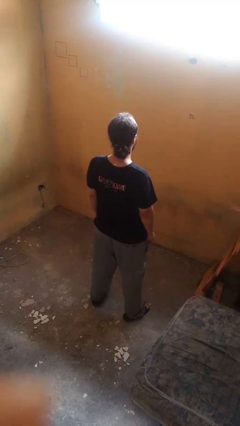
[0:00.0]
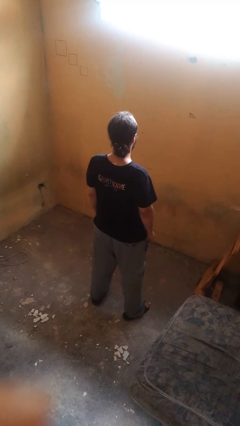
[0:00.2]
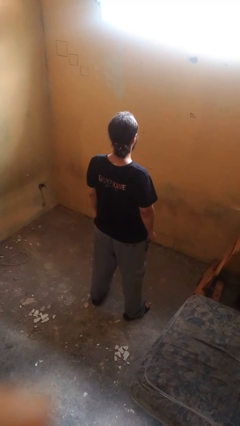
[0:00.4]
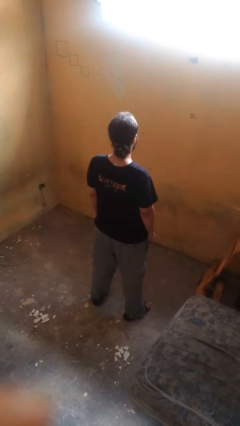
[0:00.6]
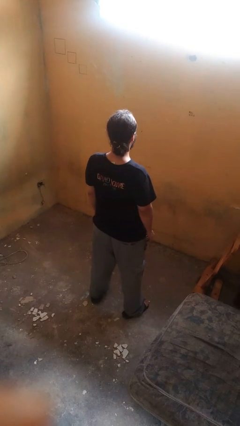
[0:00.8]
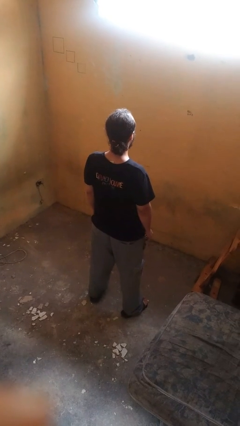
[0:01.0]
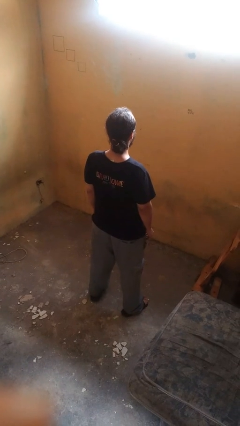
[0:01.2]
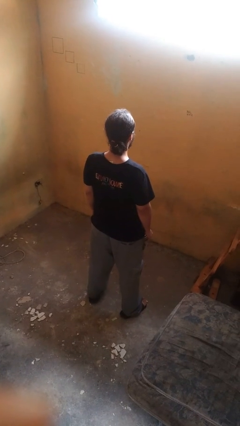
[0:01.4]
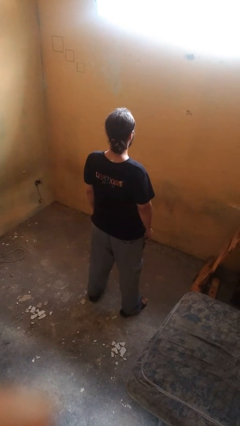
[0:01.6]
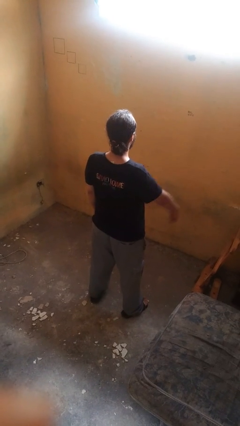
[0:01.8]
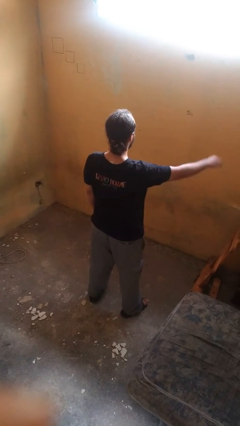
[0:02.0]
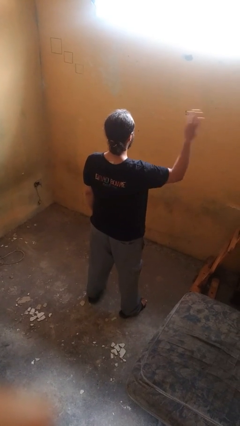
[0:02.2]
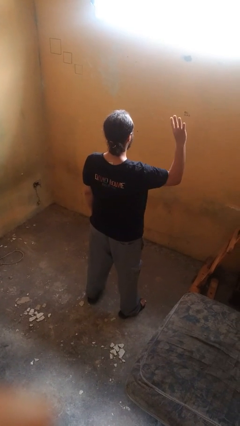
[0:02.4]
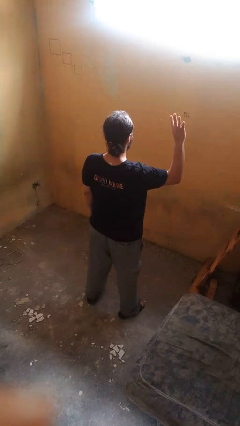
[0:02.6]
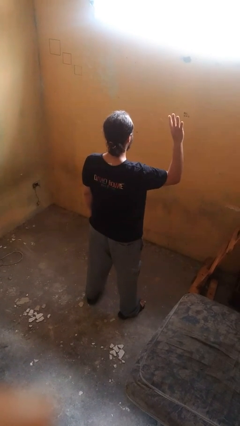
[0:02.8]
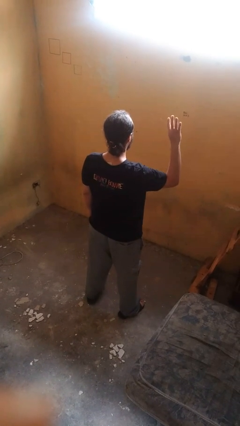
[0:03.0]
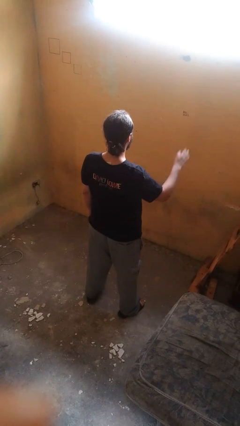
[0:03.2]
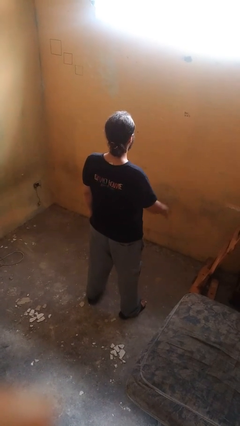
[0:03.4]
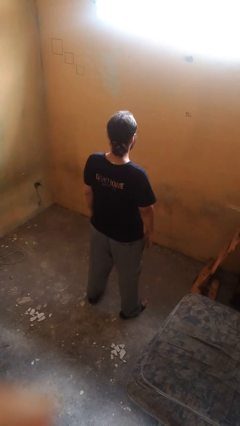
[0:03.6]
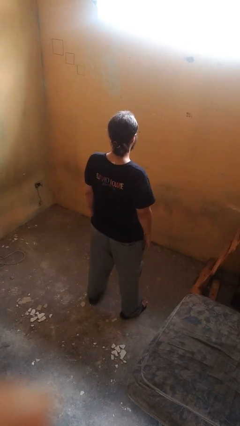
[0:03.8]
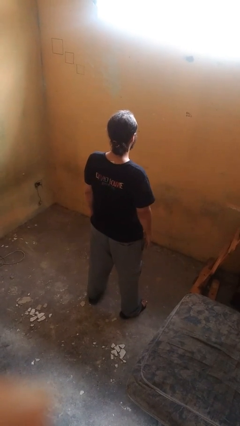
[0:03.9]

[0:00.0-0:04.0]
person gestures number four

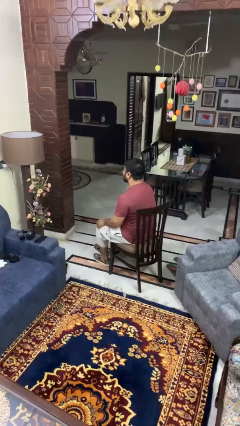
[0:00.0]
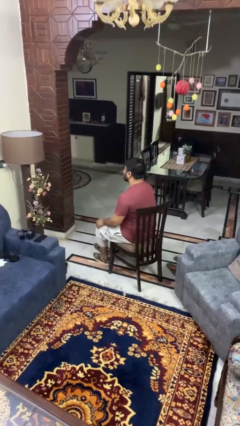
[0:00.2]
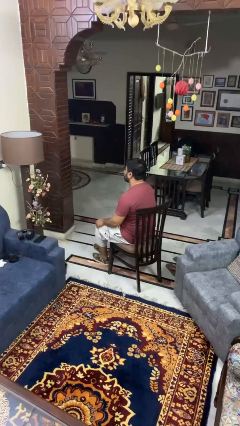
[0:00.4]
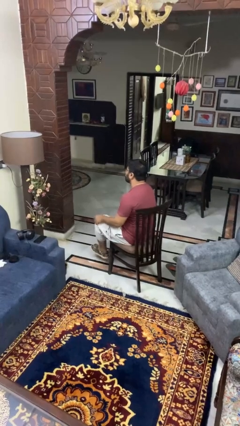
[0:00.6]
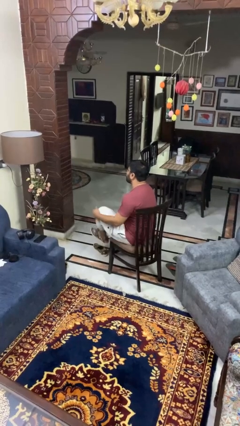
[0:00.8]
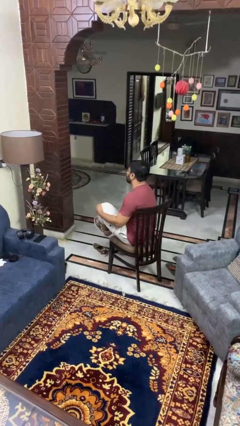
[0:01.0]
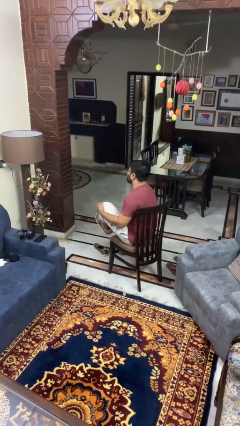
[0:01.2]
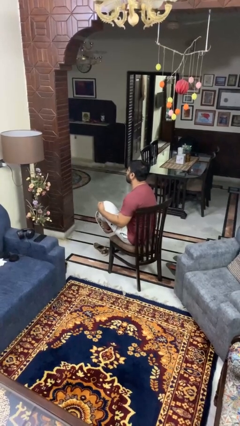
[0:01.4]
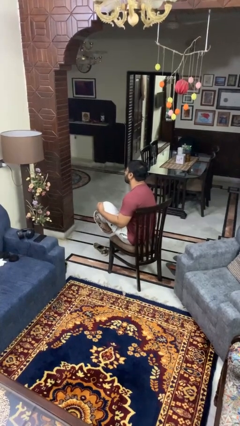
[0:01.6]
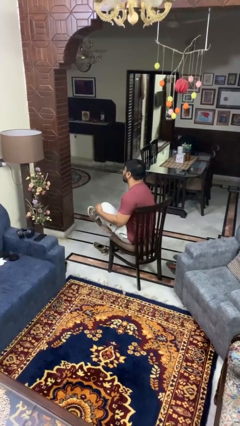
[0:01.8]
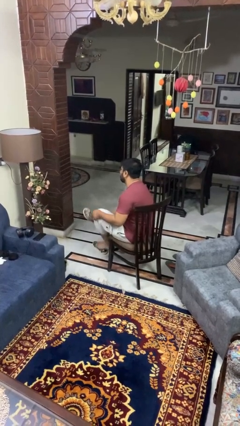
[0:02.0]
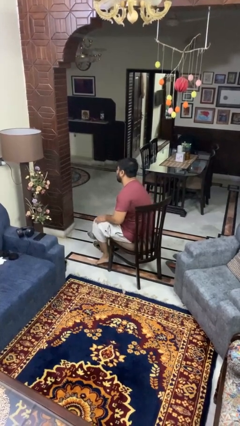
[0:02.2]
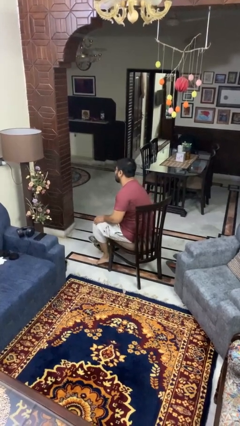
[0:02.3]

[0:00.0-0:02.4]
person takes off shoes

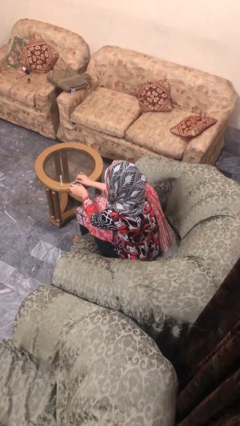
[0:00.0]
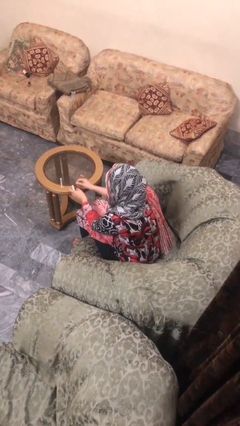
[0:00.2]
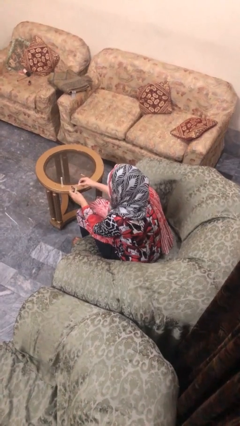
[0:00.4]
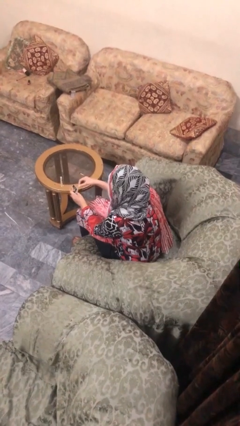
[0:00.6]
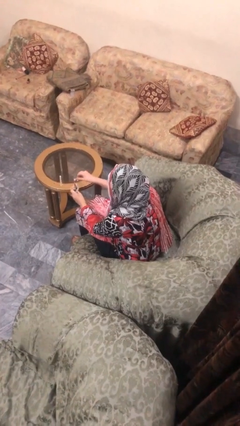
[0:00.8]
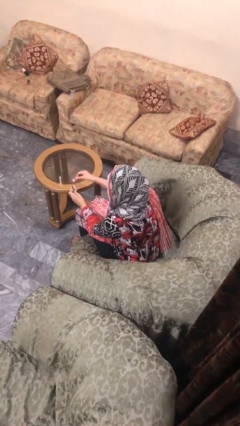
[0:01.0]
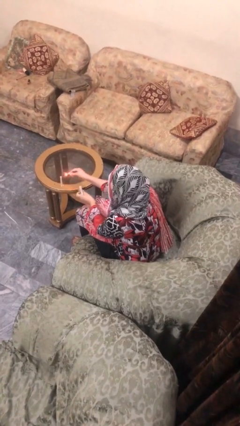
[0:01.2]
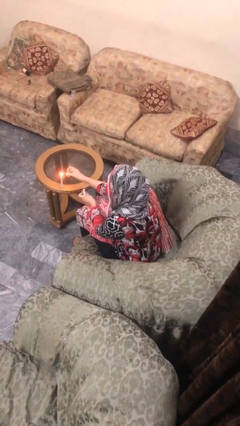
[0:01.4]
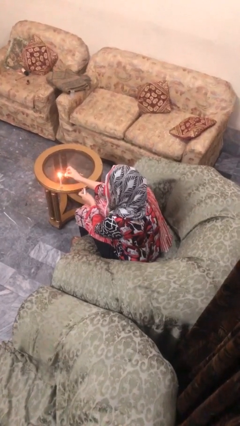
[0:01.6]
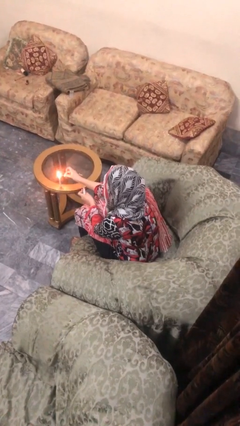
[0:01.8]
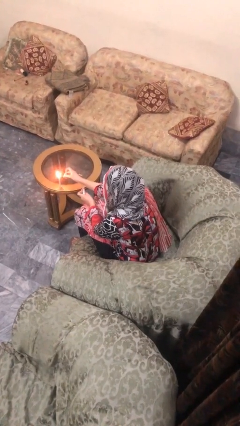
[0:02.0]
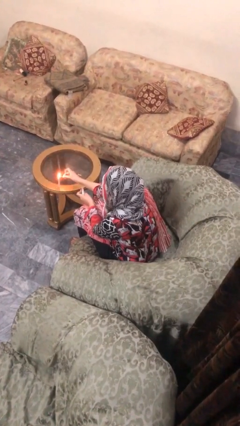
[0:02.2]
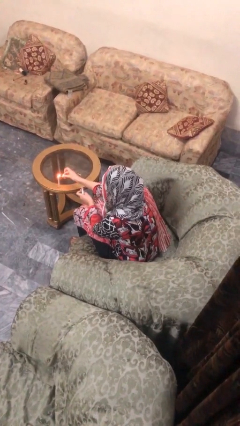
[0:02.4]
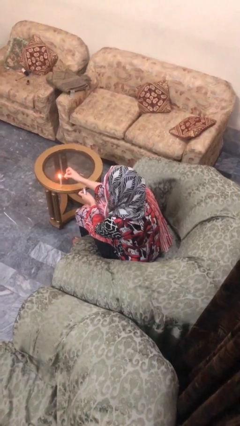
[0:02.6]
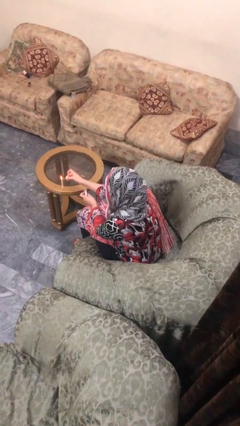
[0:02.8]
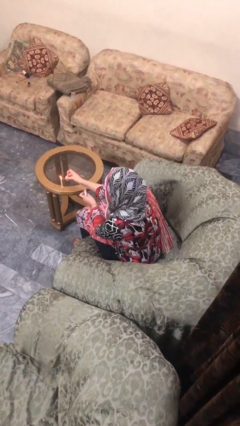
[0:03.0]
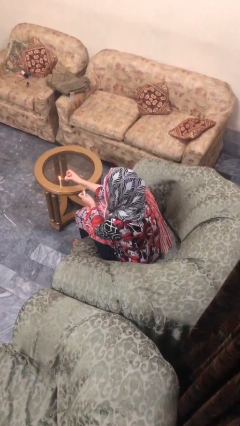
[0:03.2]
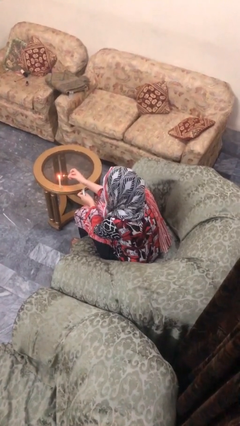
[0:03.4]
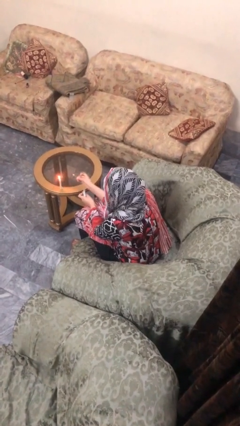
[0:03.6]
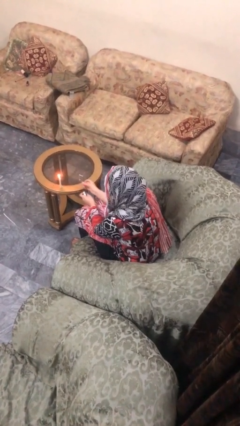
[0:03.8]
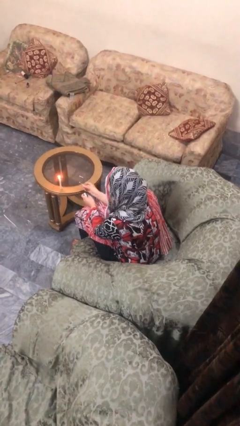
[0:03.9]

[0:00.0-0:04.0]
person lights candle

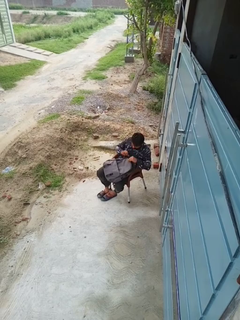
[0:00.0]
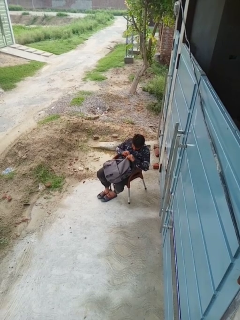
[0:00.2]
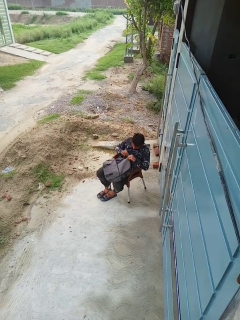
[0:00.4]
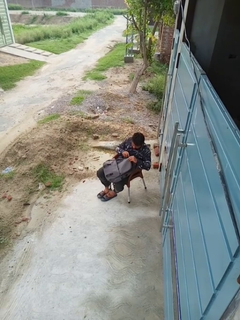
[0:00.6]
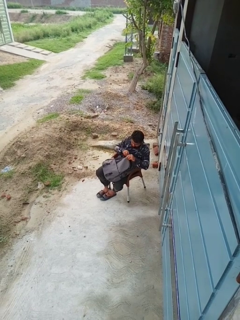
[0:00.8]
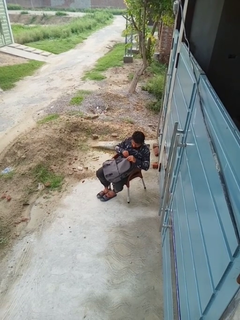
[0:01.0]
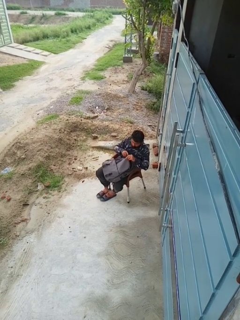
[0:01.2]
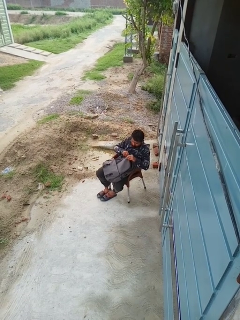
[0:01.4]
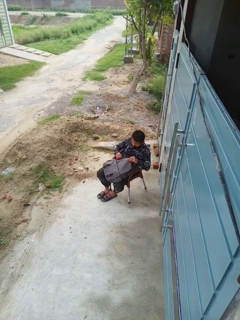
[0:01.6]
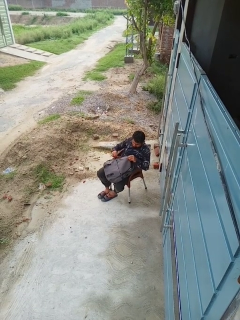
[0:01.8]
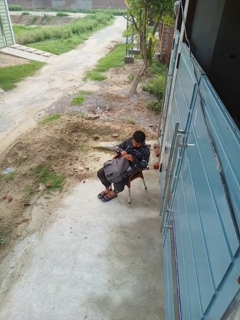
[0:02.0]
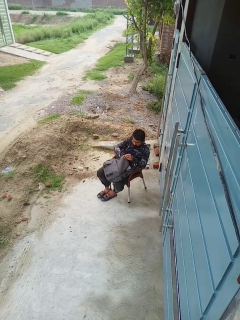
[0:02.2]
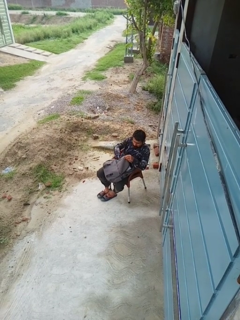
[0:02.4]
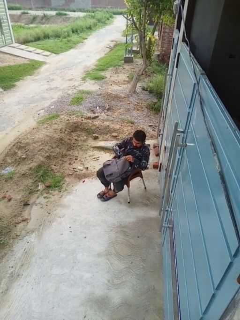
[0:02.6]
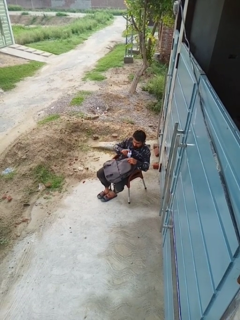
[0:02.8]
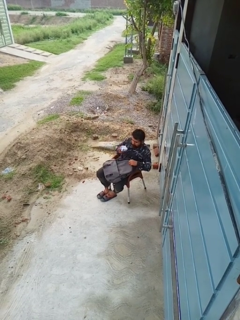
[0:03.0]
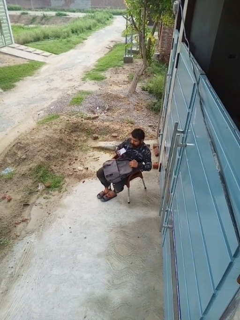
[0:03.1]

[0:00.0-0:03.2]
person takes object from backpack

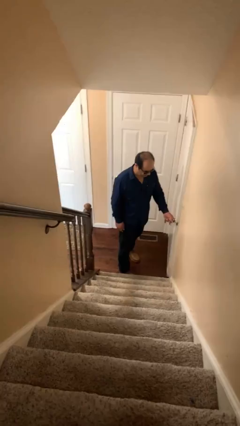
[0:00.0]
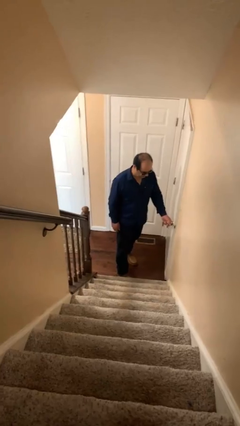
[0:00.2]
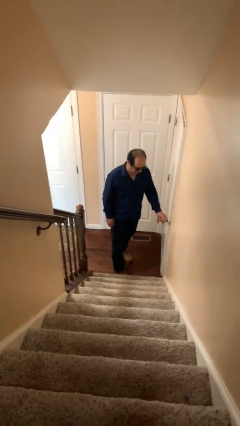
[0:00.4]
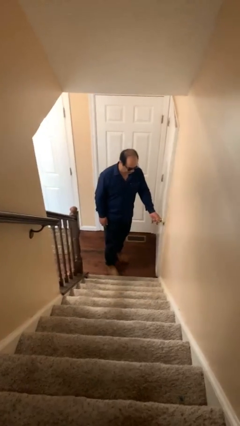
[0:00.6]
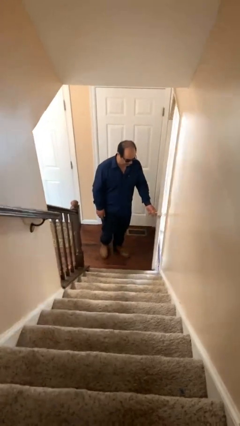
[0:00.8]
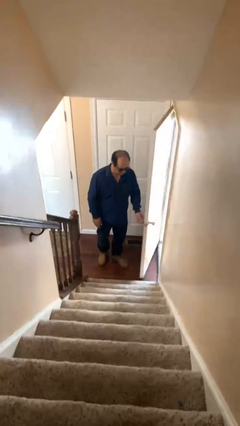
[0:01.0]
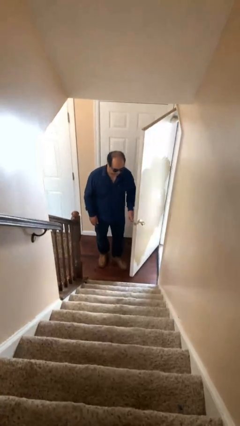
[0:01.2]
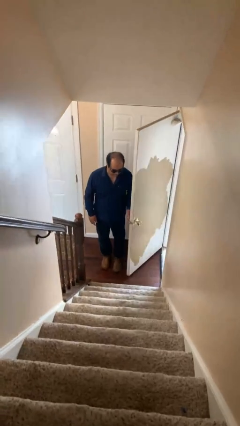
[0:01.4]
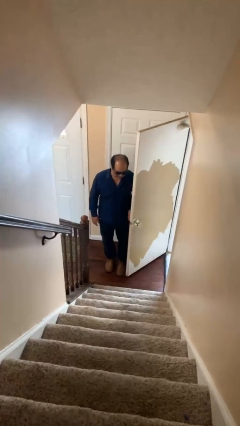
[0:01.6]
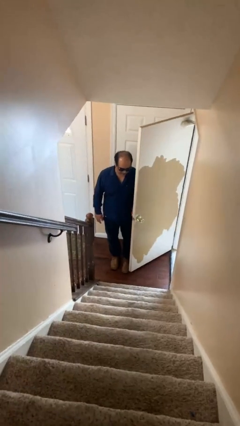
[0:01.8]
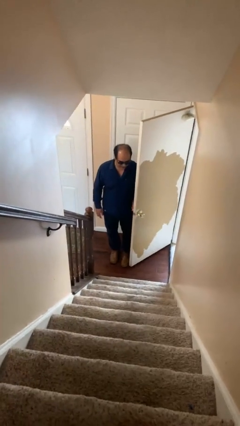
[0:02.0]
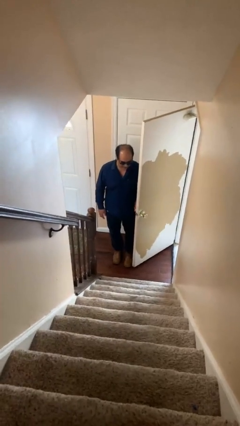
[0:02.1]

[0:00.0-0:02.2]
person opens facility door

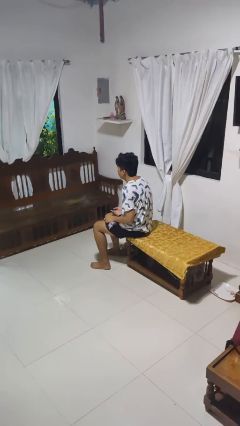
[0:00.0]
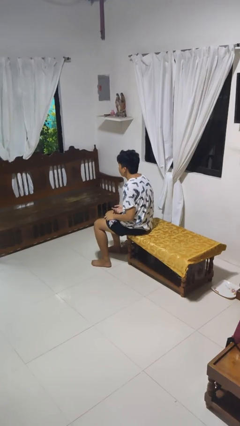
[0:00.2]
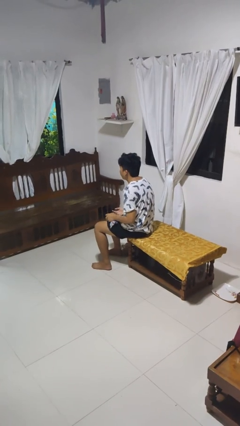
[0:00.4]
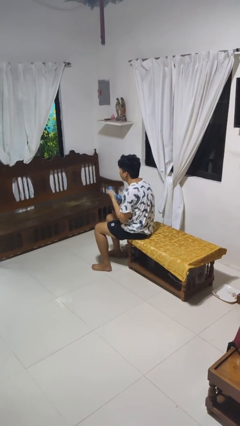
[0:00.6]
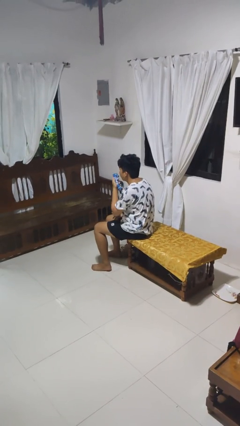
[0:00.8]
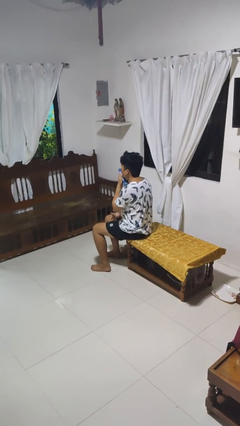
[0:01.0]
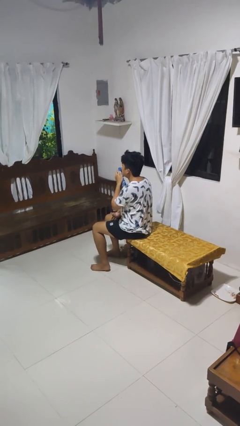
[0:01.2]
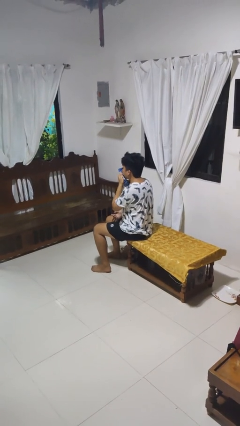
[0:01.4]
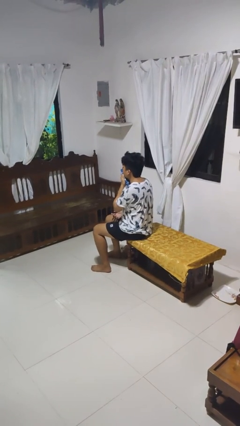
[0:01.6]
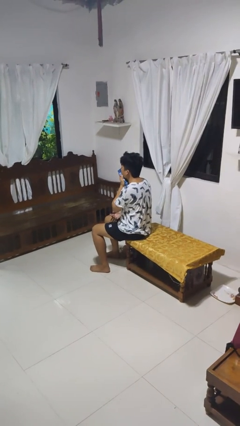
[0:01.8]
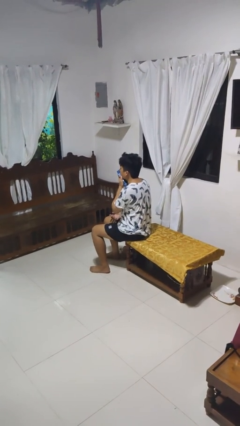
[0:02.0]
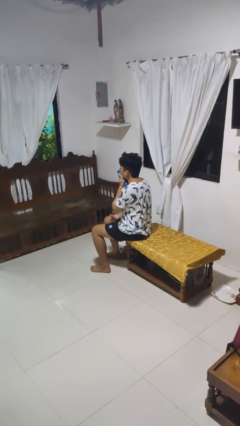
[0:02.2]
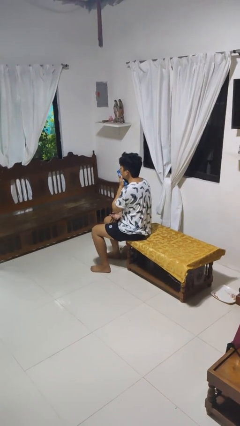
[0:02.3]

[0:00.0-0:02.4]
person blows nose

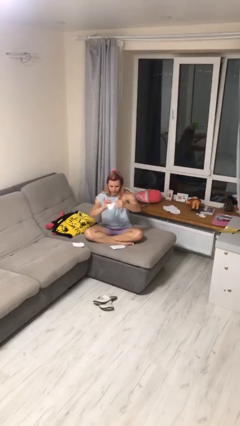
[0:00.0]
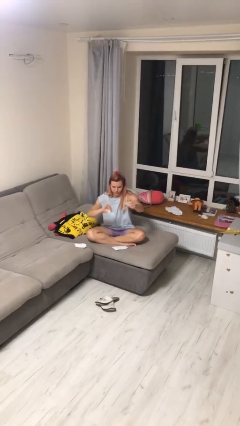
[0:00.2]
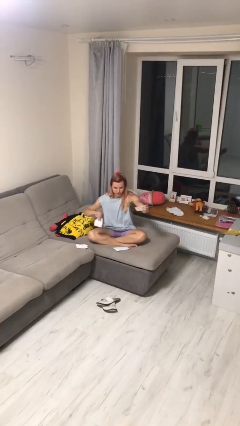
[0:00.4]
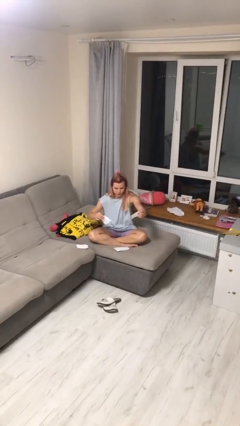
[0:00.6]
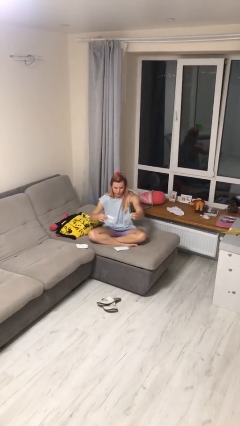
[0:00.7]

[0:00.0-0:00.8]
person tears paper
